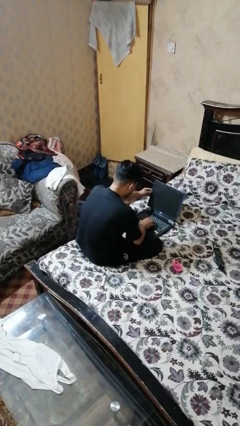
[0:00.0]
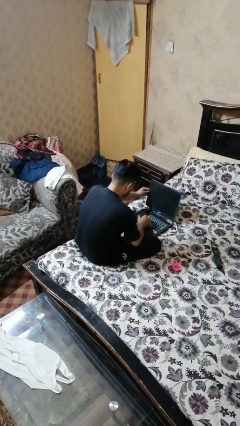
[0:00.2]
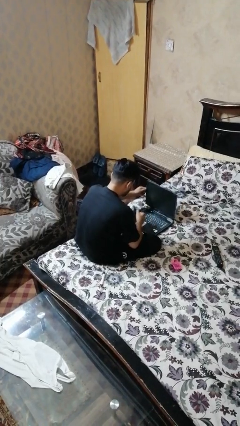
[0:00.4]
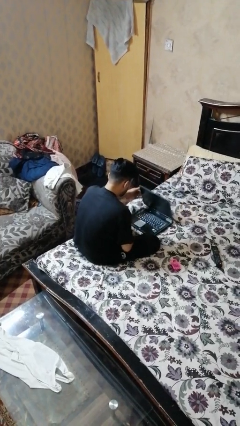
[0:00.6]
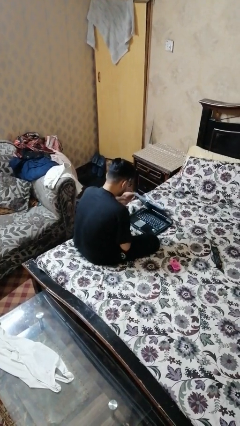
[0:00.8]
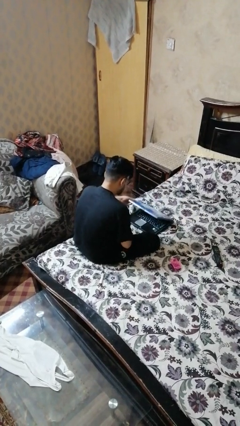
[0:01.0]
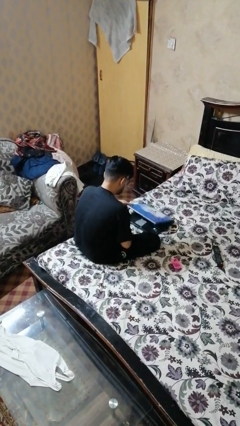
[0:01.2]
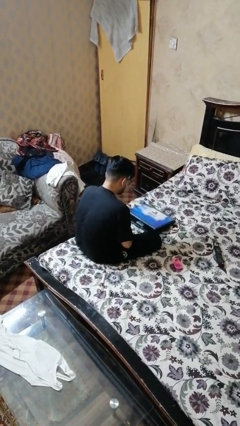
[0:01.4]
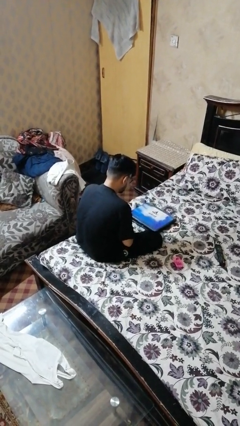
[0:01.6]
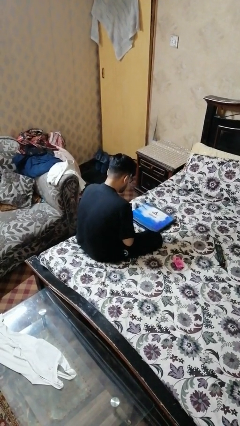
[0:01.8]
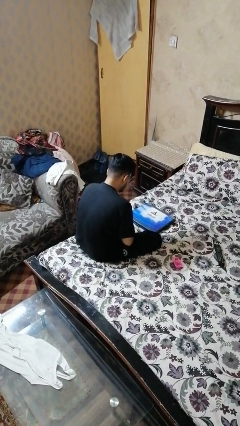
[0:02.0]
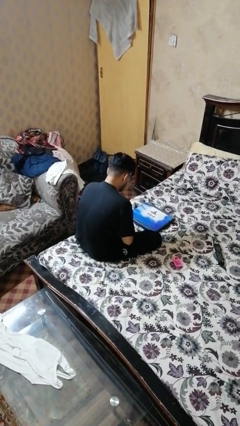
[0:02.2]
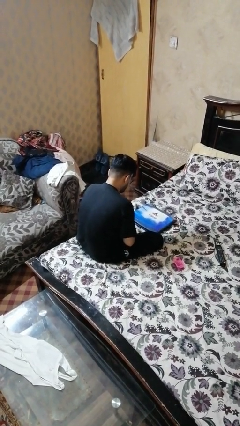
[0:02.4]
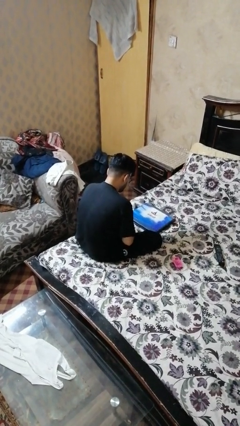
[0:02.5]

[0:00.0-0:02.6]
person closes laptop

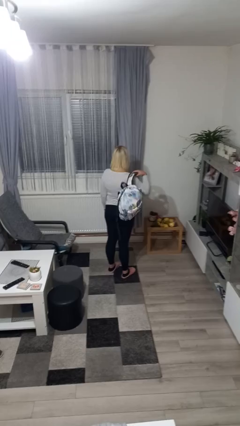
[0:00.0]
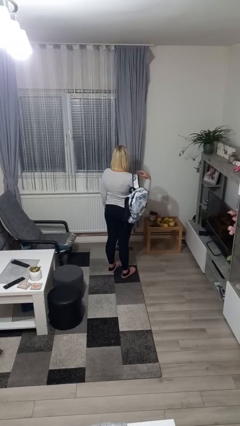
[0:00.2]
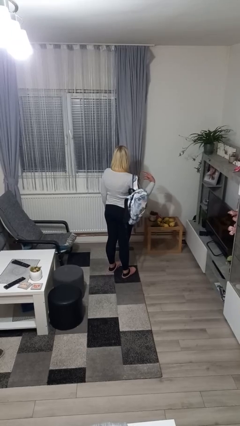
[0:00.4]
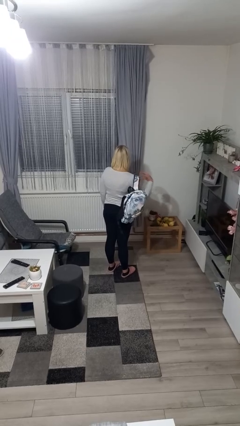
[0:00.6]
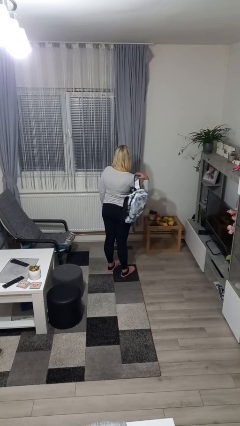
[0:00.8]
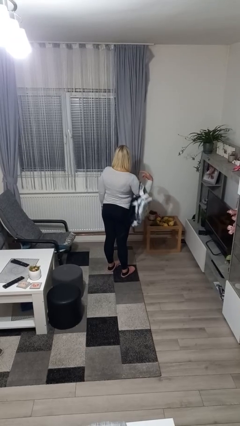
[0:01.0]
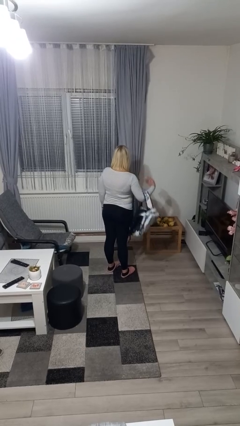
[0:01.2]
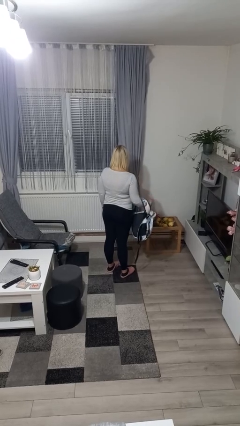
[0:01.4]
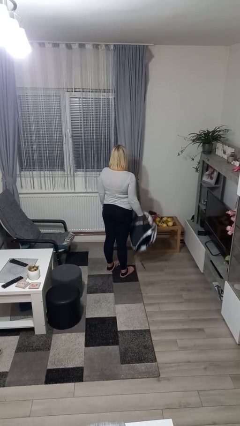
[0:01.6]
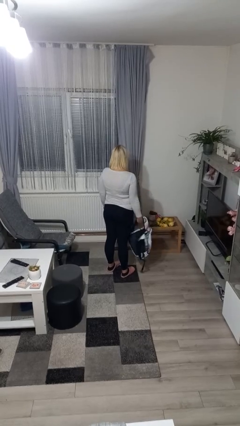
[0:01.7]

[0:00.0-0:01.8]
person takes off backpack

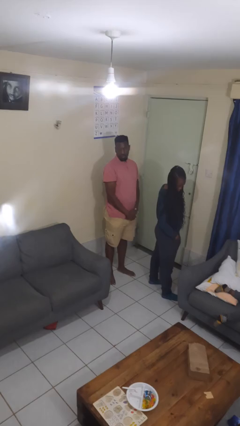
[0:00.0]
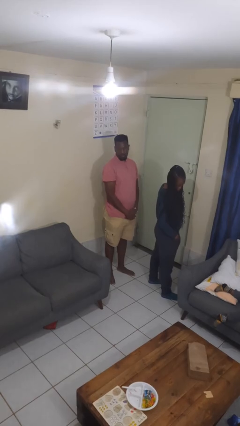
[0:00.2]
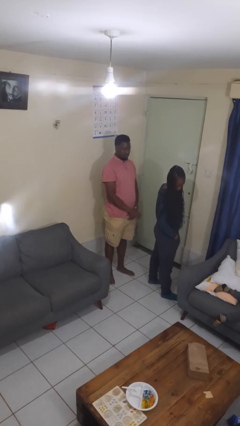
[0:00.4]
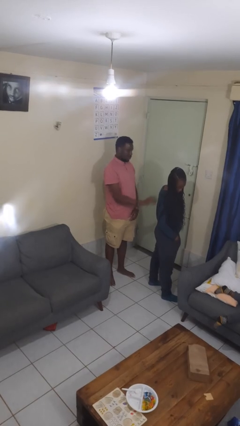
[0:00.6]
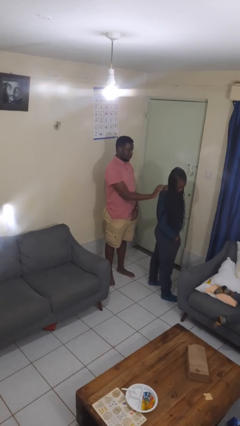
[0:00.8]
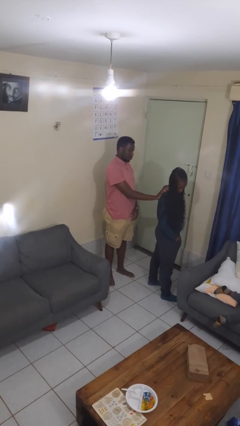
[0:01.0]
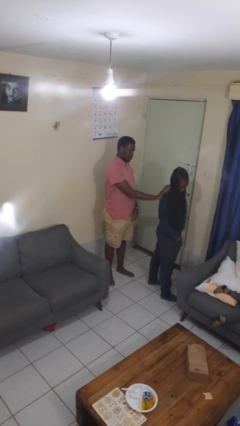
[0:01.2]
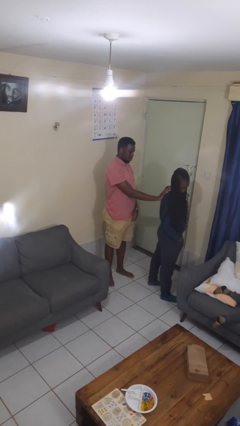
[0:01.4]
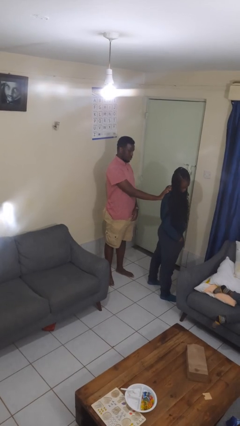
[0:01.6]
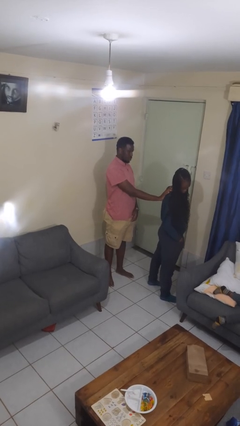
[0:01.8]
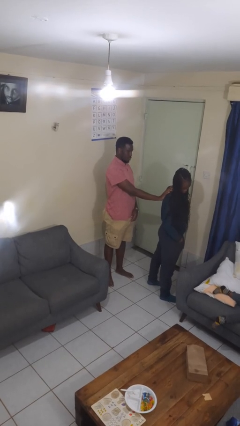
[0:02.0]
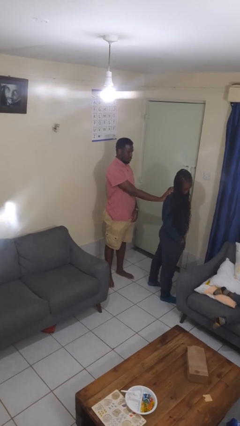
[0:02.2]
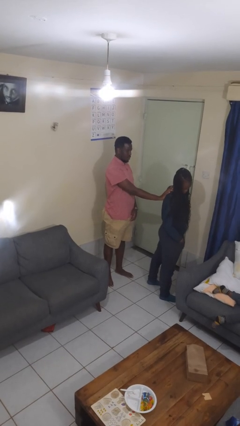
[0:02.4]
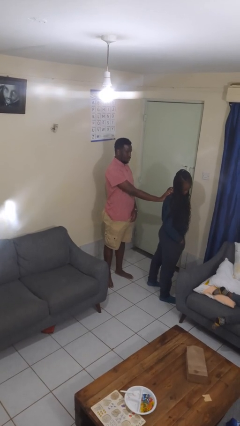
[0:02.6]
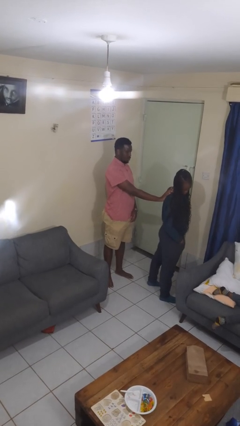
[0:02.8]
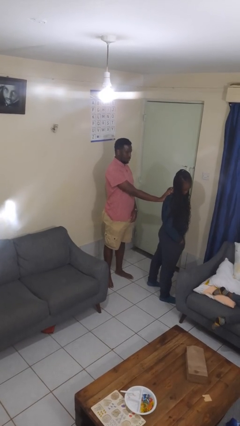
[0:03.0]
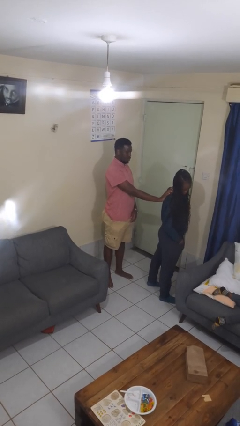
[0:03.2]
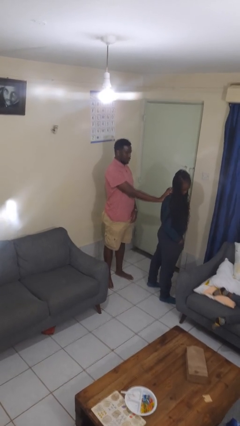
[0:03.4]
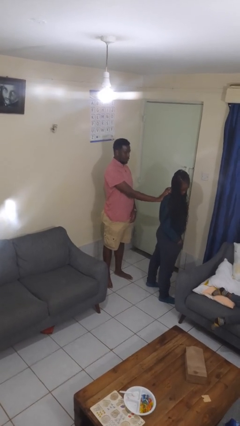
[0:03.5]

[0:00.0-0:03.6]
person touches back of person

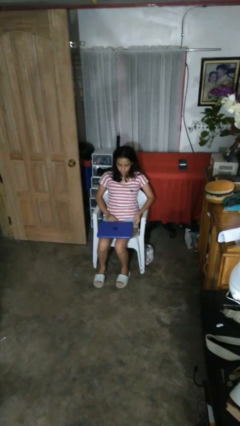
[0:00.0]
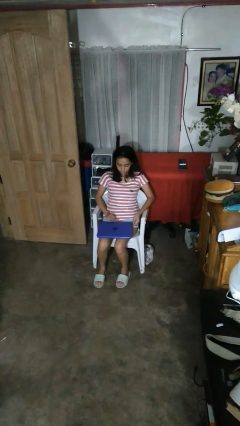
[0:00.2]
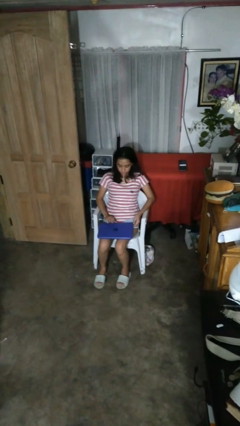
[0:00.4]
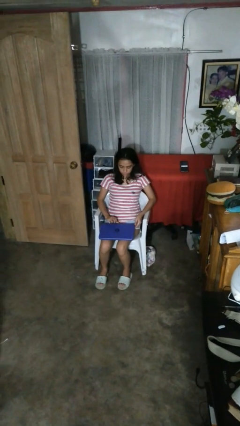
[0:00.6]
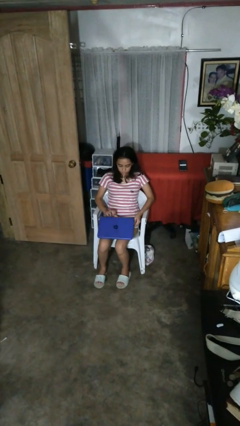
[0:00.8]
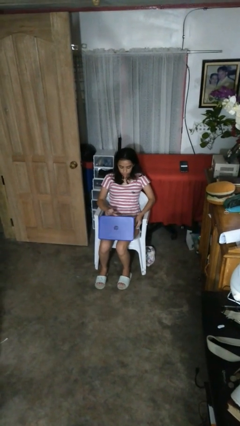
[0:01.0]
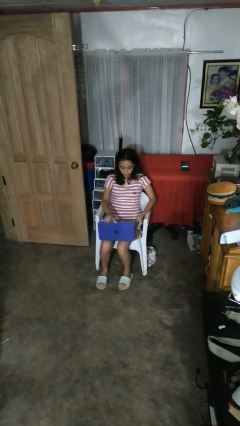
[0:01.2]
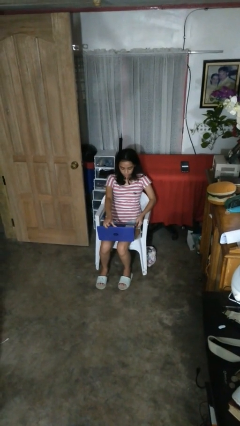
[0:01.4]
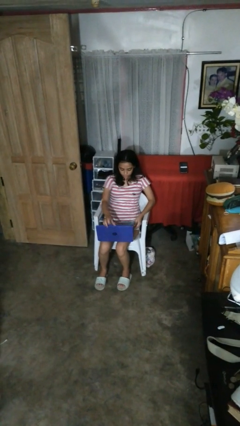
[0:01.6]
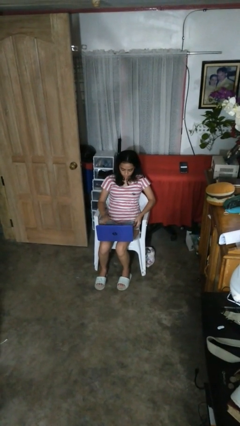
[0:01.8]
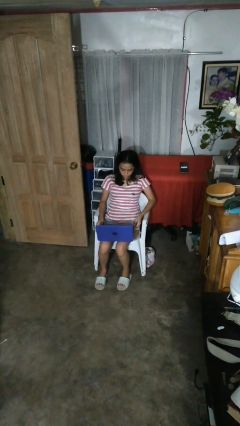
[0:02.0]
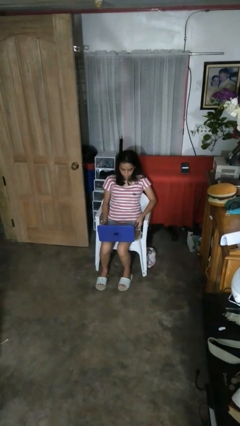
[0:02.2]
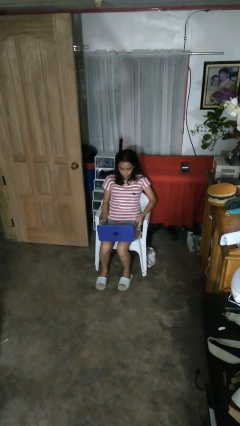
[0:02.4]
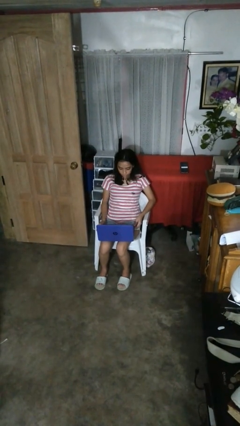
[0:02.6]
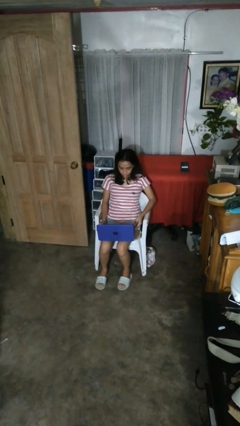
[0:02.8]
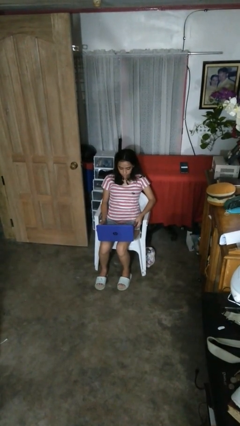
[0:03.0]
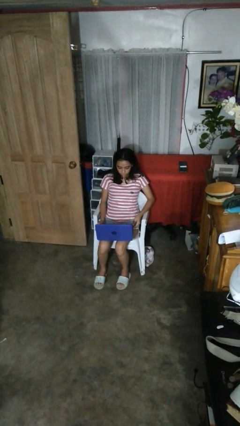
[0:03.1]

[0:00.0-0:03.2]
person opens laptop

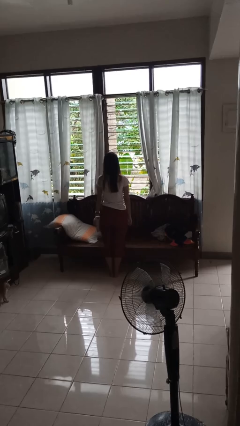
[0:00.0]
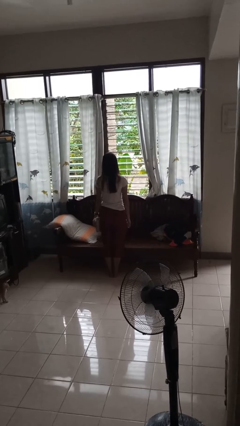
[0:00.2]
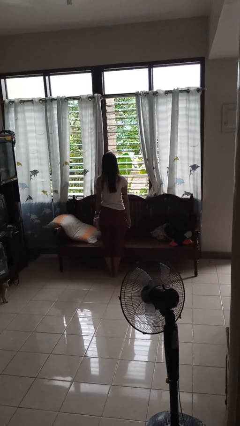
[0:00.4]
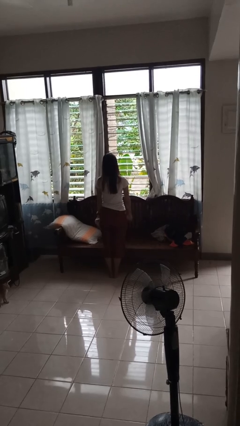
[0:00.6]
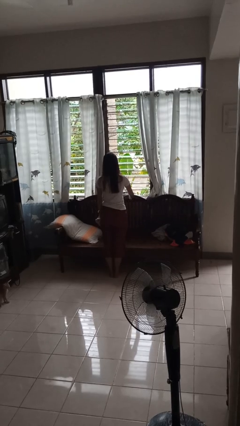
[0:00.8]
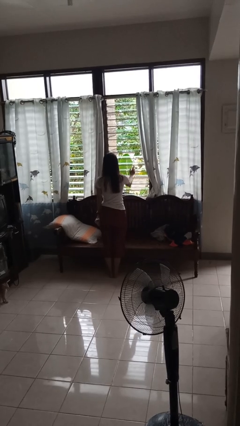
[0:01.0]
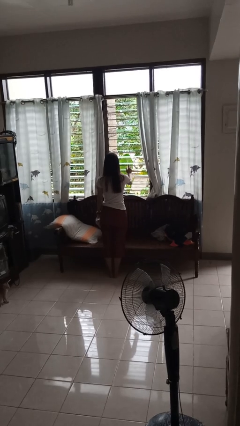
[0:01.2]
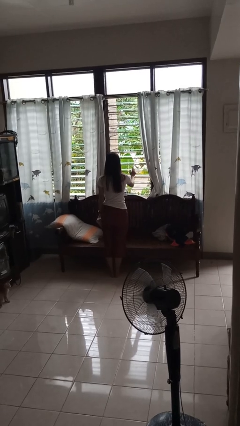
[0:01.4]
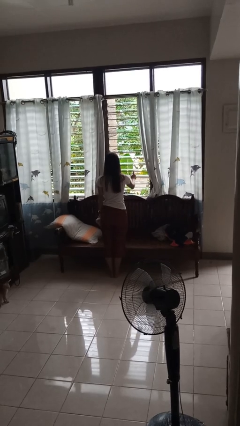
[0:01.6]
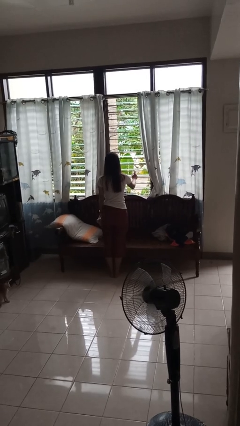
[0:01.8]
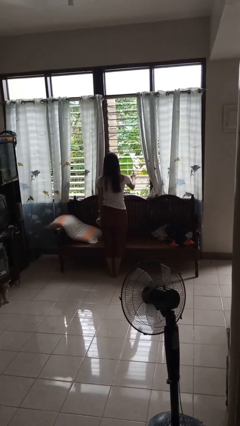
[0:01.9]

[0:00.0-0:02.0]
person sprays from bottle

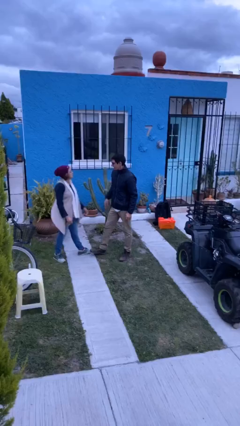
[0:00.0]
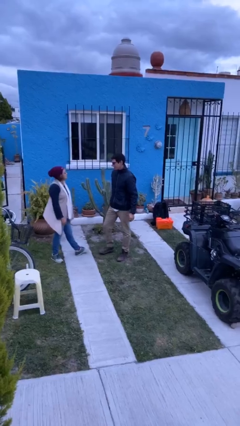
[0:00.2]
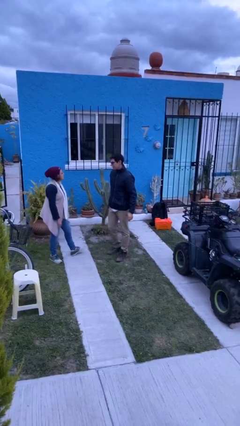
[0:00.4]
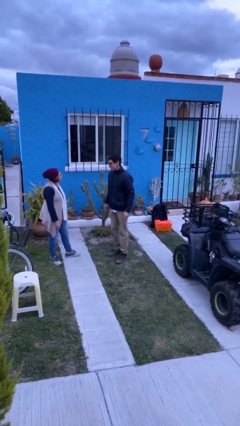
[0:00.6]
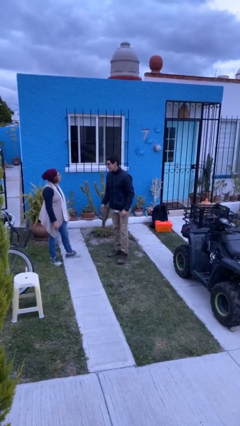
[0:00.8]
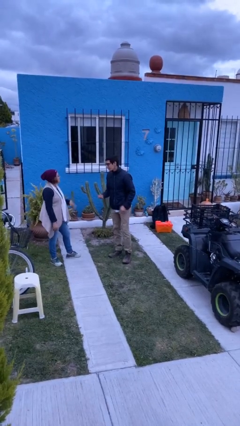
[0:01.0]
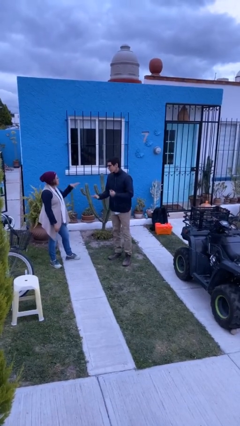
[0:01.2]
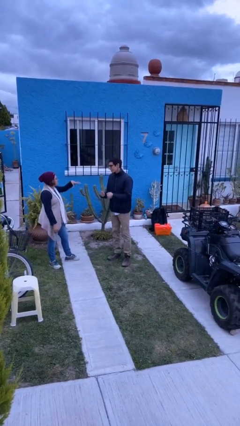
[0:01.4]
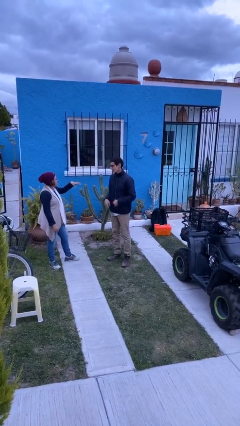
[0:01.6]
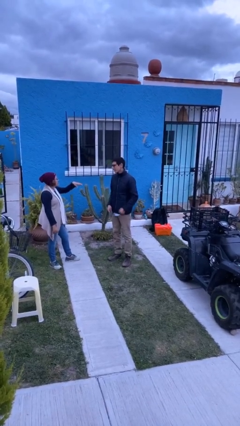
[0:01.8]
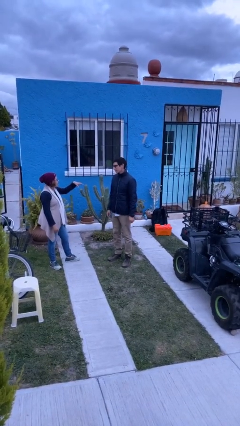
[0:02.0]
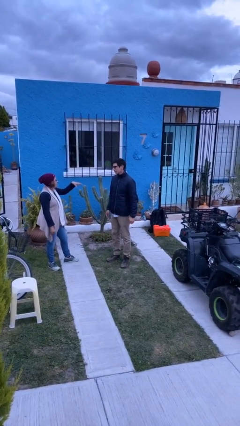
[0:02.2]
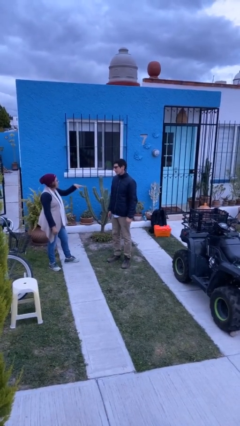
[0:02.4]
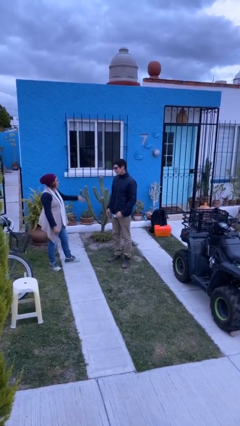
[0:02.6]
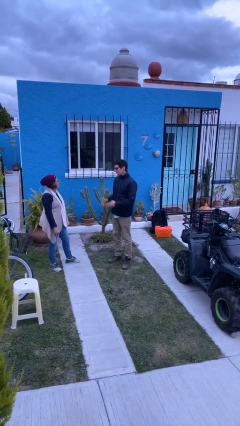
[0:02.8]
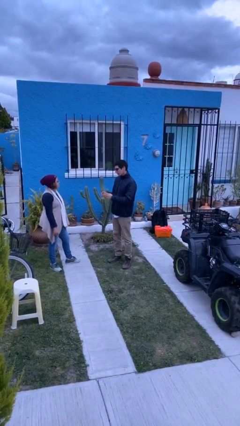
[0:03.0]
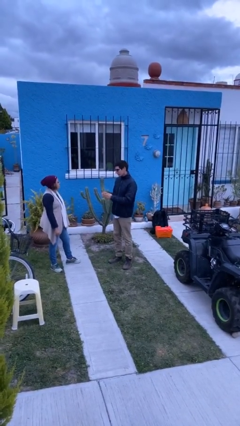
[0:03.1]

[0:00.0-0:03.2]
person talks to person

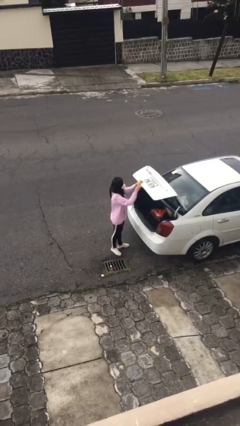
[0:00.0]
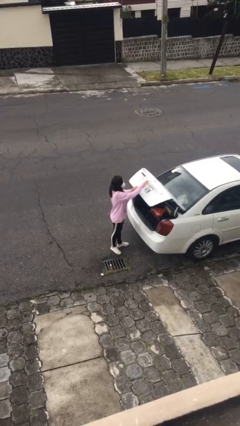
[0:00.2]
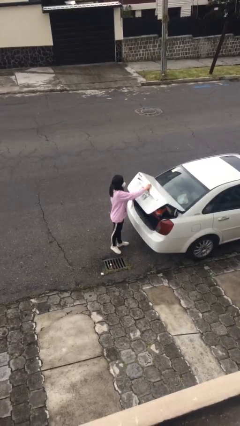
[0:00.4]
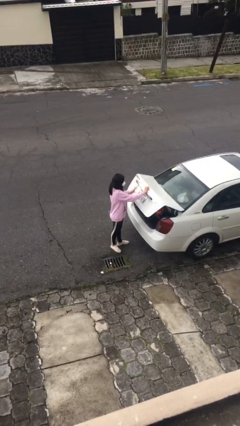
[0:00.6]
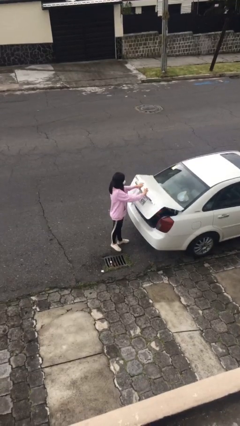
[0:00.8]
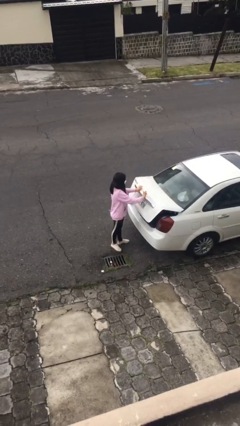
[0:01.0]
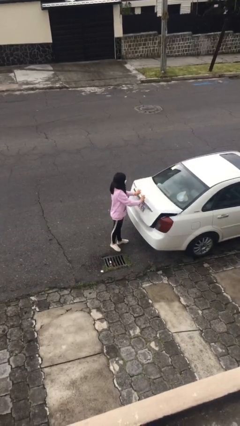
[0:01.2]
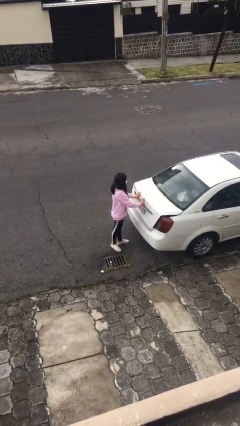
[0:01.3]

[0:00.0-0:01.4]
person closes car trunk
